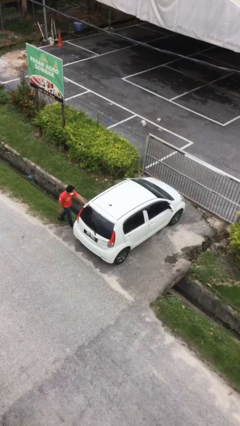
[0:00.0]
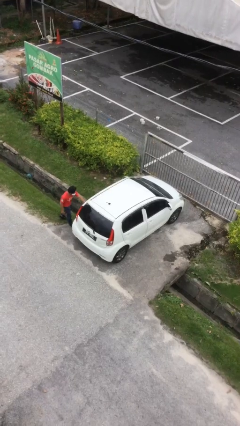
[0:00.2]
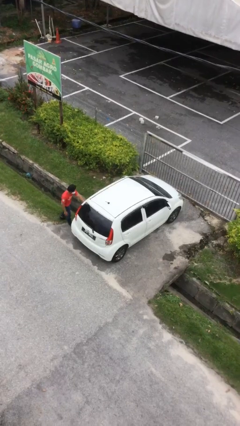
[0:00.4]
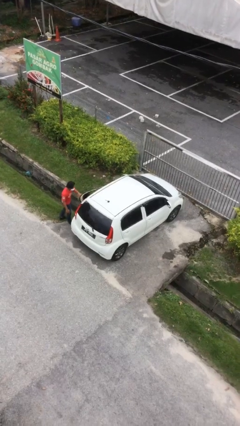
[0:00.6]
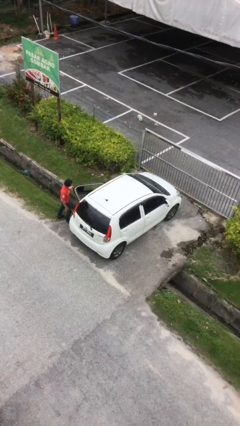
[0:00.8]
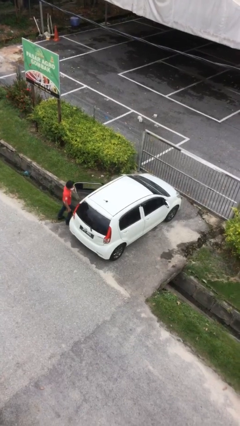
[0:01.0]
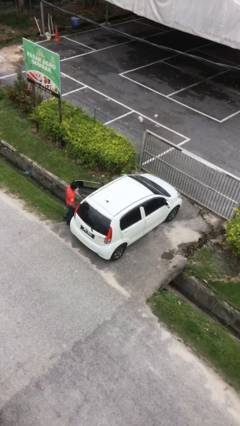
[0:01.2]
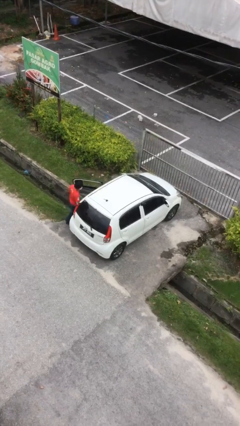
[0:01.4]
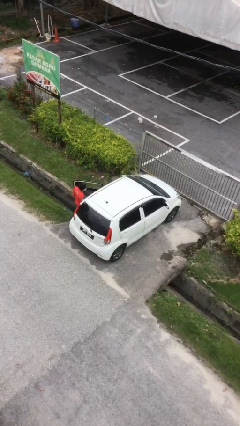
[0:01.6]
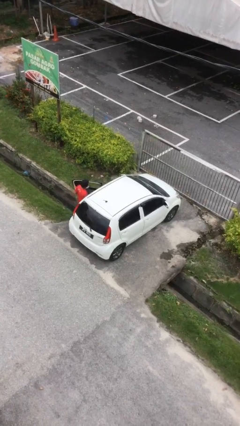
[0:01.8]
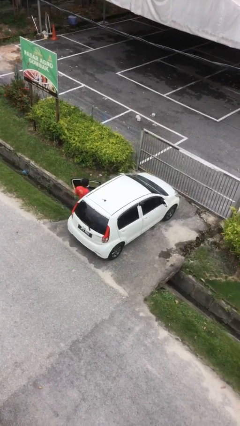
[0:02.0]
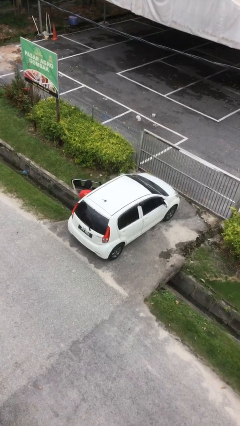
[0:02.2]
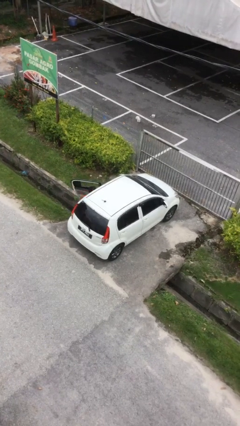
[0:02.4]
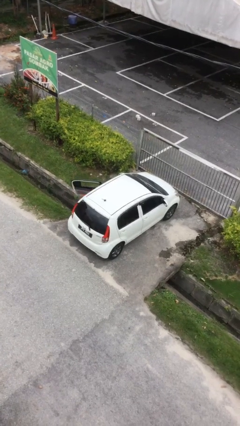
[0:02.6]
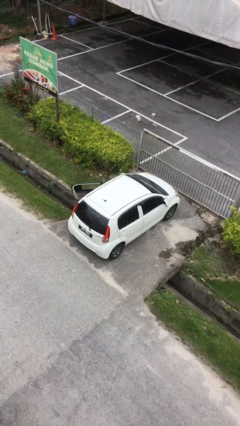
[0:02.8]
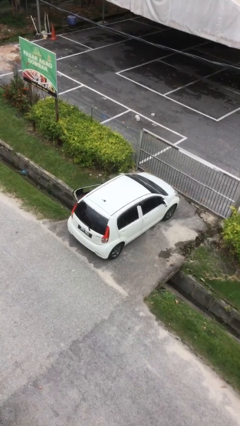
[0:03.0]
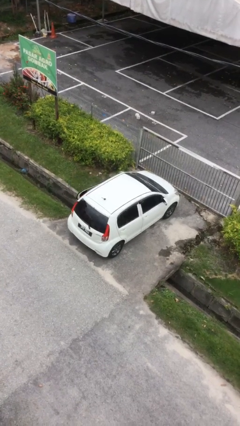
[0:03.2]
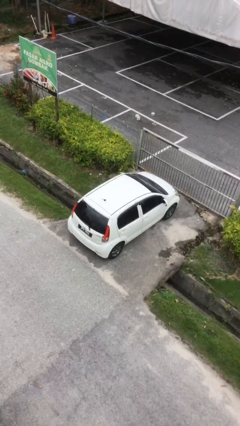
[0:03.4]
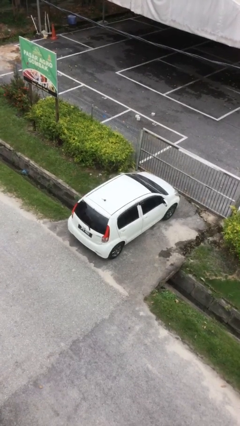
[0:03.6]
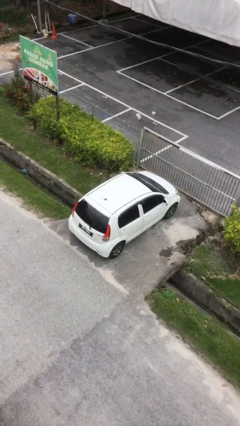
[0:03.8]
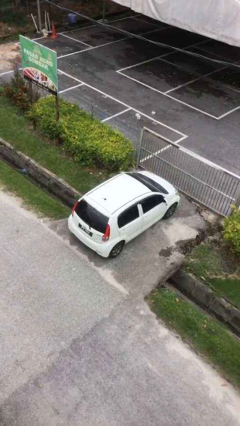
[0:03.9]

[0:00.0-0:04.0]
car picks up person

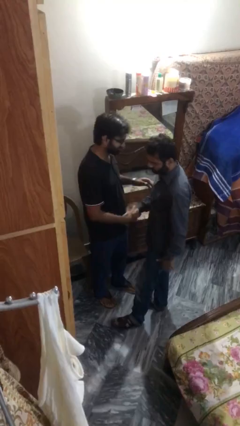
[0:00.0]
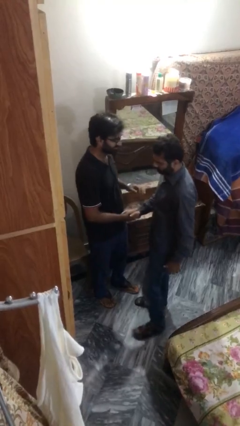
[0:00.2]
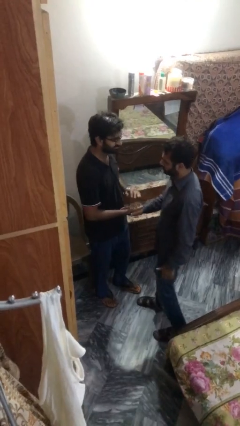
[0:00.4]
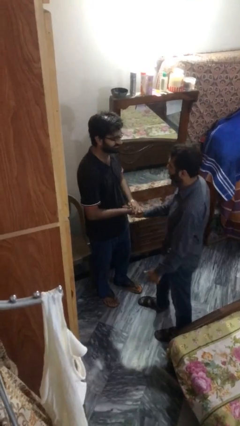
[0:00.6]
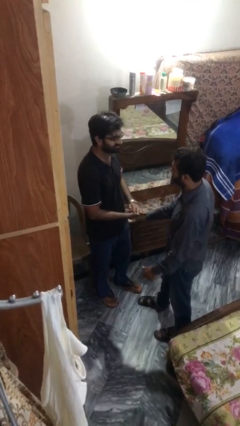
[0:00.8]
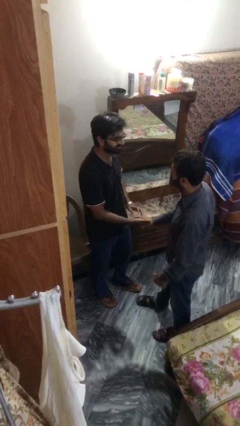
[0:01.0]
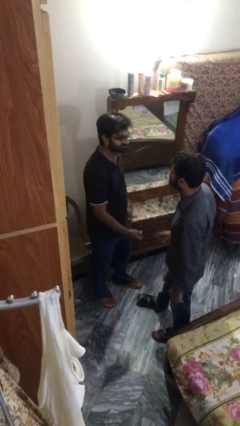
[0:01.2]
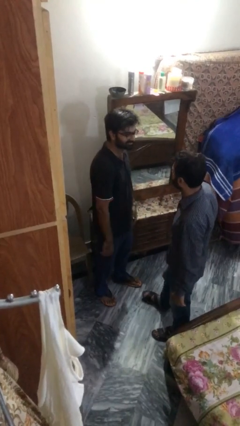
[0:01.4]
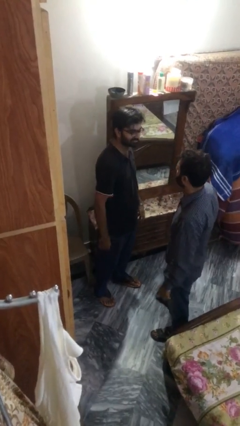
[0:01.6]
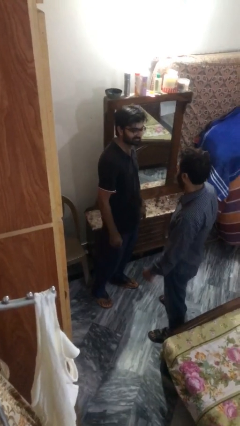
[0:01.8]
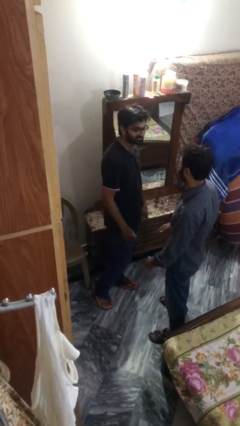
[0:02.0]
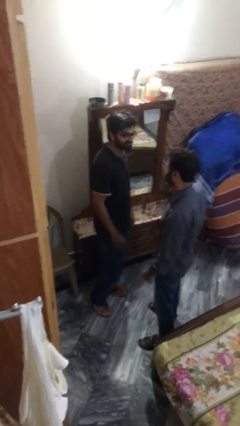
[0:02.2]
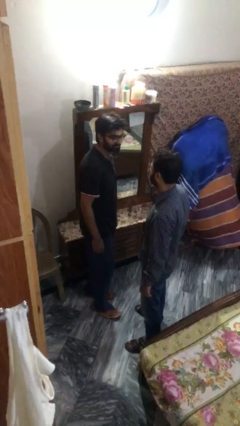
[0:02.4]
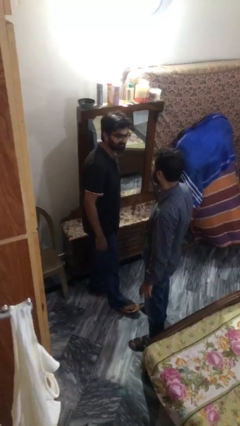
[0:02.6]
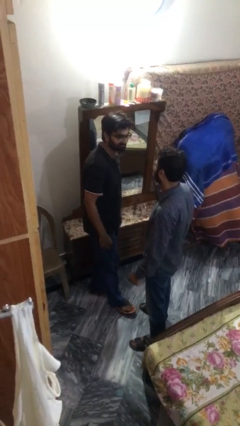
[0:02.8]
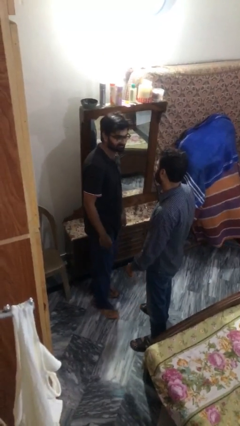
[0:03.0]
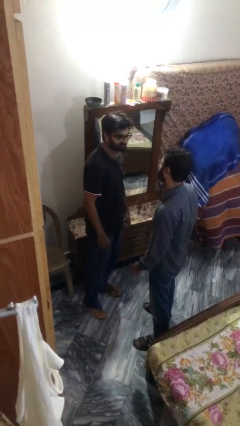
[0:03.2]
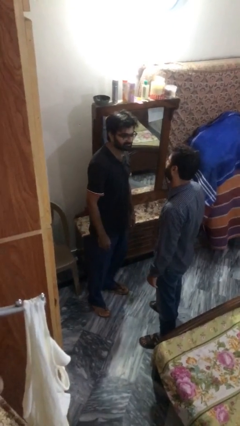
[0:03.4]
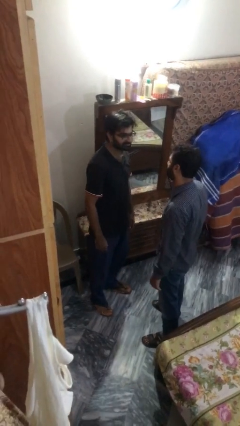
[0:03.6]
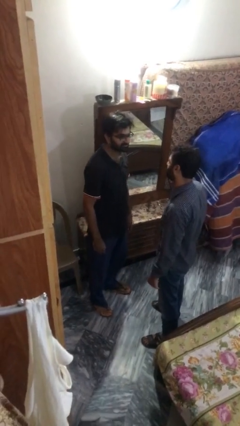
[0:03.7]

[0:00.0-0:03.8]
person talks to person

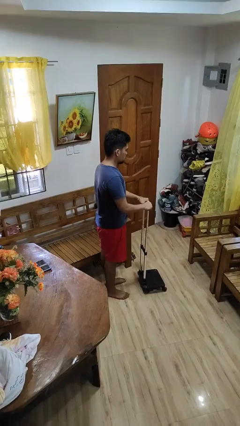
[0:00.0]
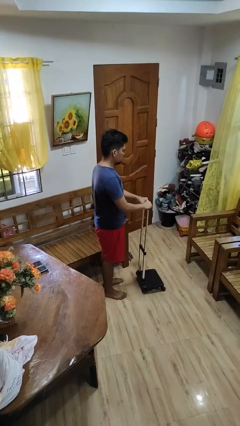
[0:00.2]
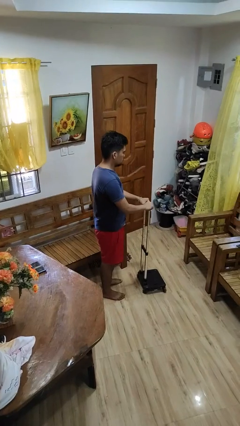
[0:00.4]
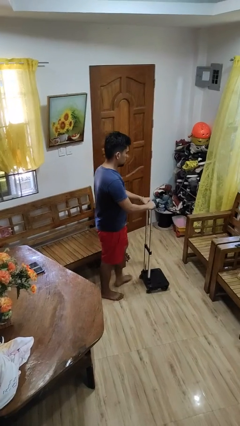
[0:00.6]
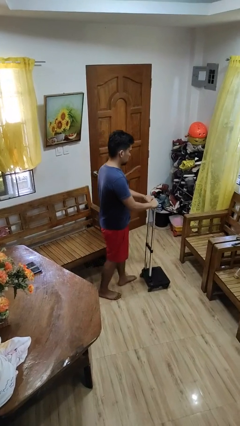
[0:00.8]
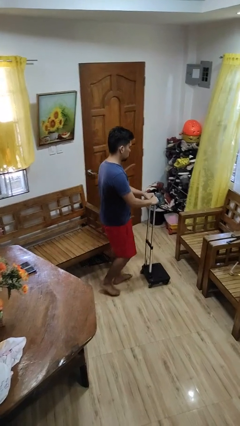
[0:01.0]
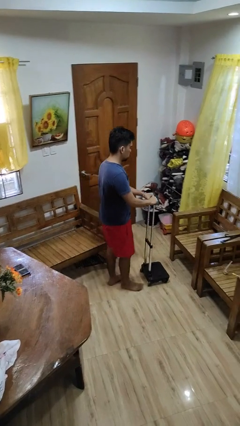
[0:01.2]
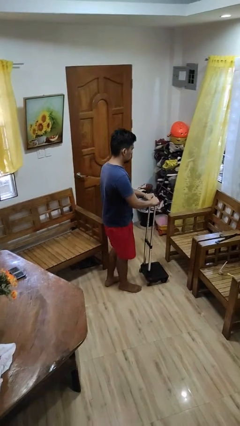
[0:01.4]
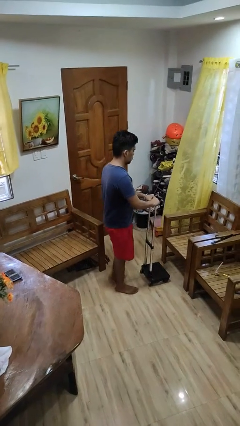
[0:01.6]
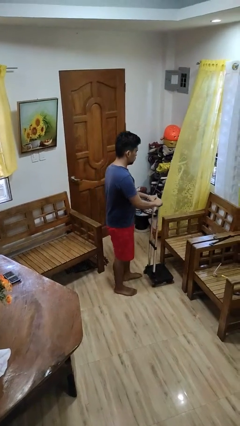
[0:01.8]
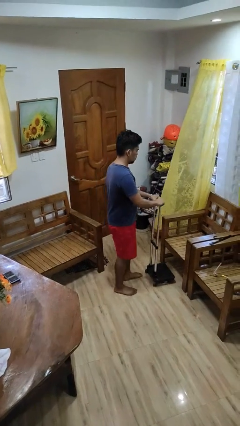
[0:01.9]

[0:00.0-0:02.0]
person pushes wheeled cart

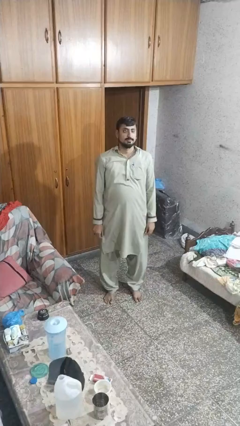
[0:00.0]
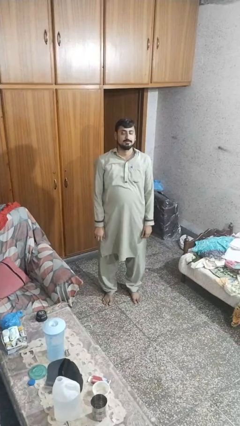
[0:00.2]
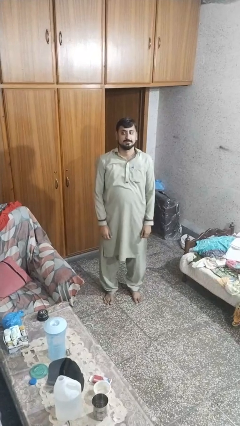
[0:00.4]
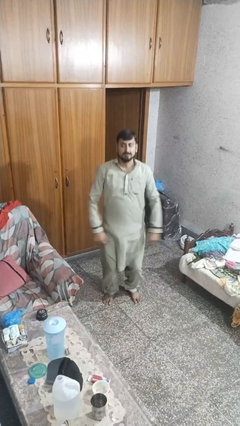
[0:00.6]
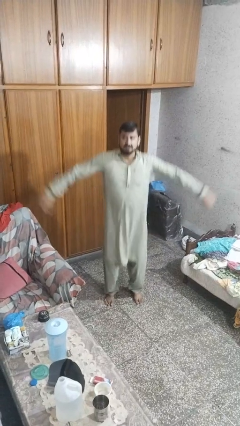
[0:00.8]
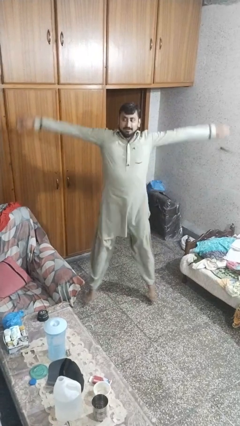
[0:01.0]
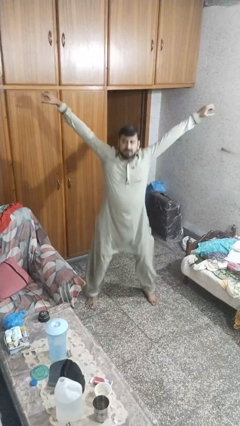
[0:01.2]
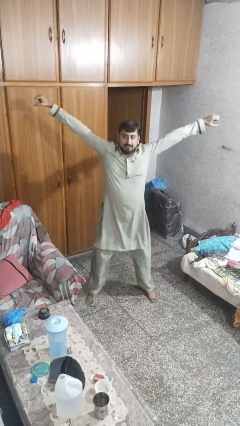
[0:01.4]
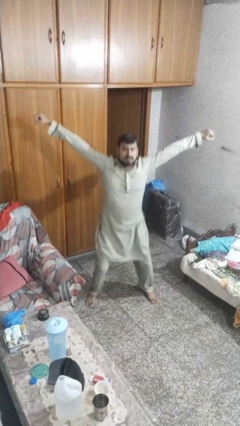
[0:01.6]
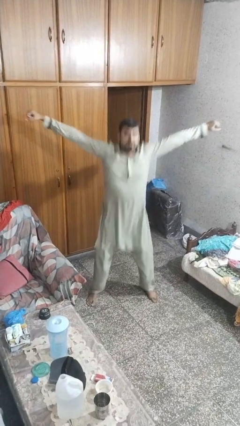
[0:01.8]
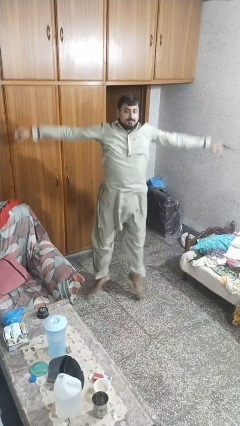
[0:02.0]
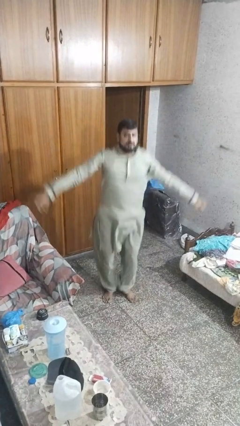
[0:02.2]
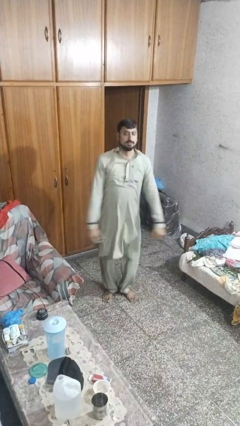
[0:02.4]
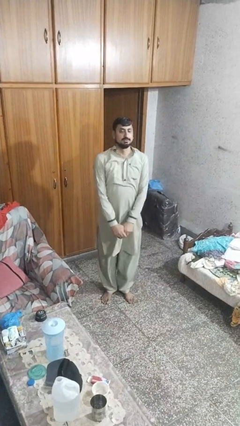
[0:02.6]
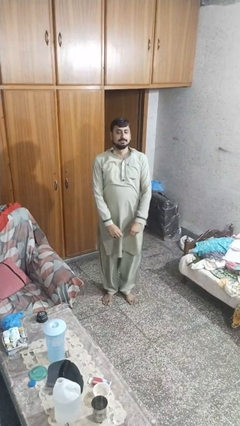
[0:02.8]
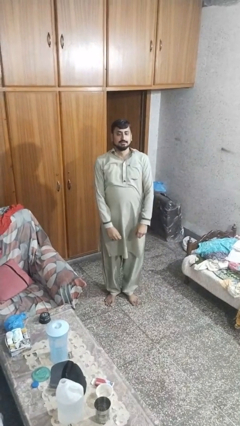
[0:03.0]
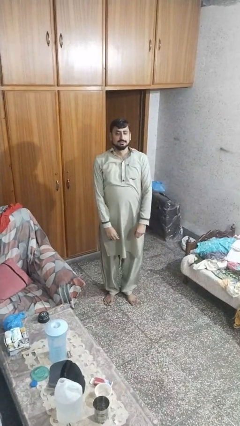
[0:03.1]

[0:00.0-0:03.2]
person exercises with jumping jacks

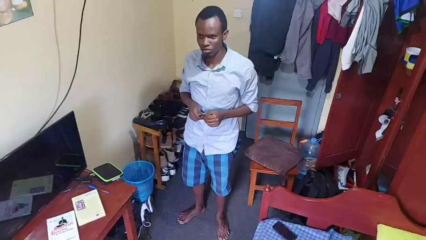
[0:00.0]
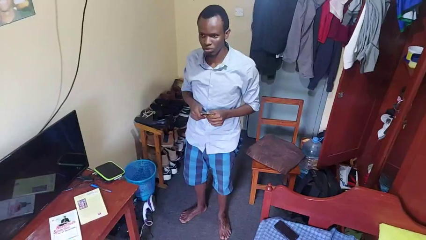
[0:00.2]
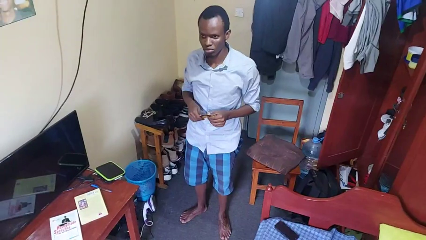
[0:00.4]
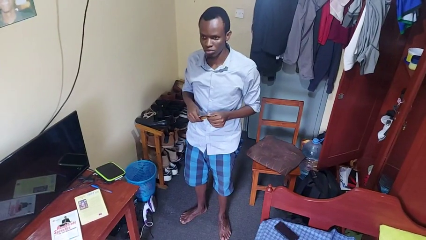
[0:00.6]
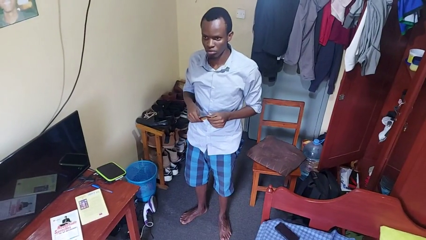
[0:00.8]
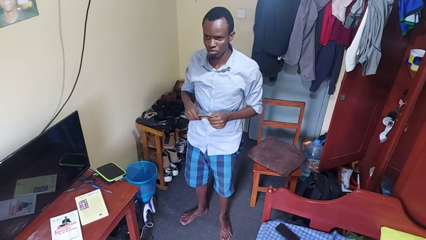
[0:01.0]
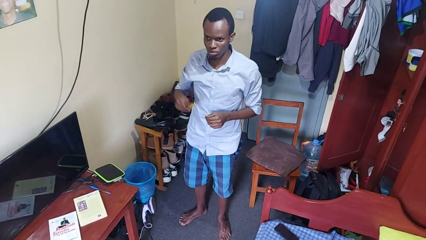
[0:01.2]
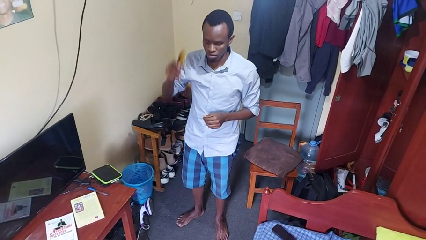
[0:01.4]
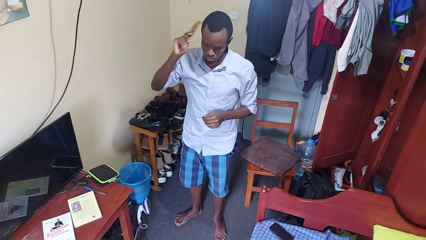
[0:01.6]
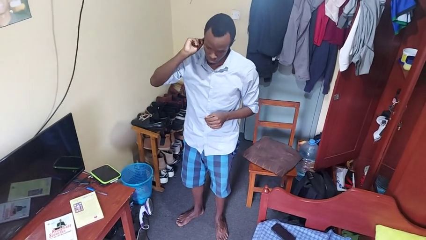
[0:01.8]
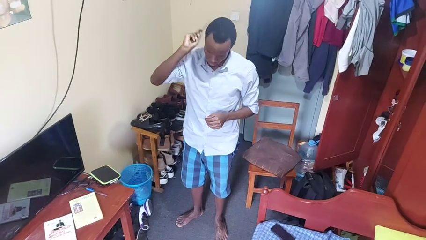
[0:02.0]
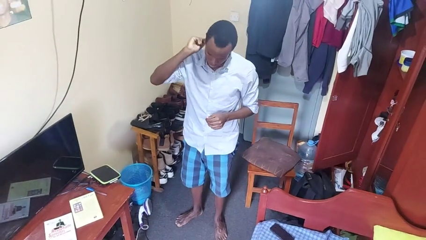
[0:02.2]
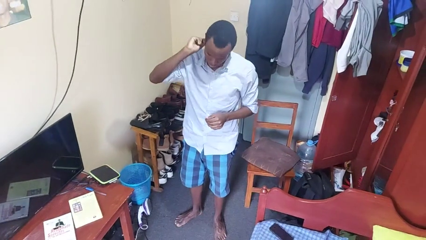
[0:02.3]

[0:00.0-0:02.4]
person brushes hair

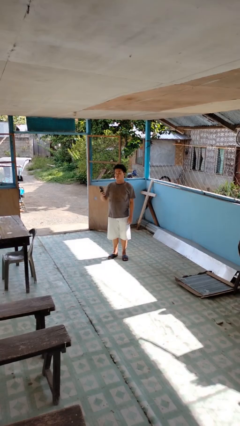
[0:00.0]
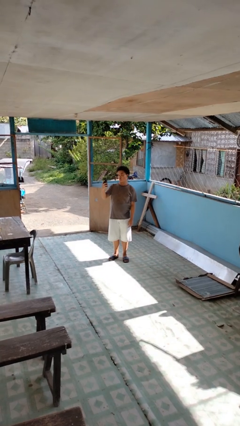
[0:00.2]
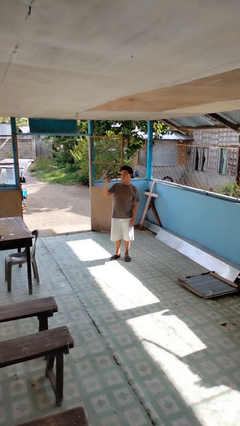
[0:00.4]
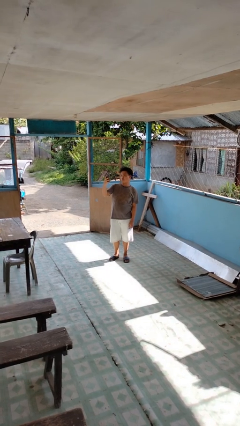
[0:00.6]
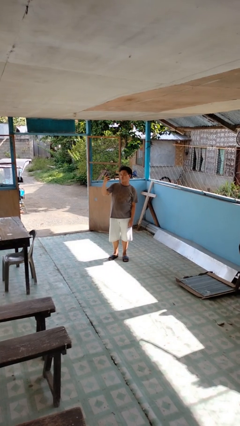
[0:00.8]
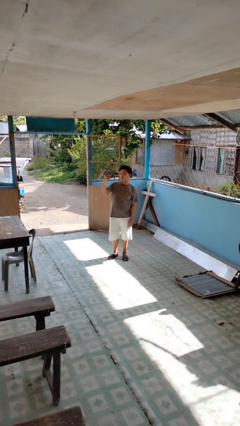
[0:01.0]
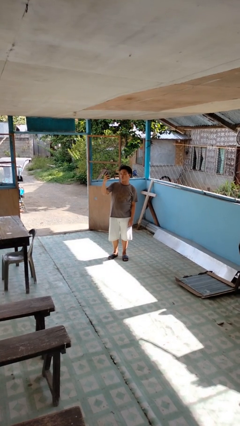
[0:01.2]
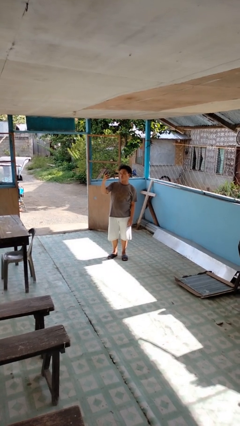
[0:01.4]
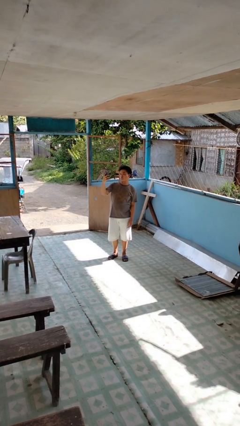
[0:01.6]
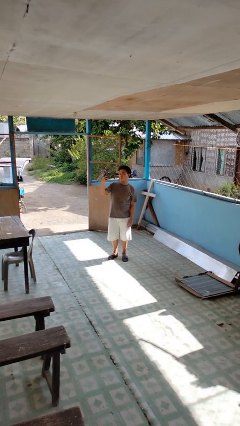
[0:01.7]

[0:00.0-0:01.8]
person takes selfie

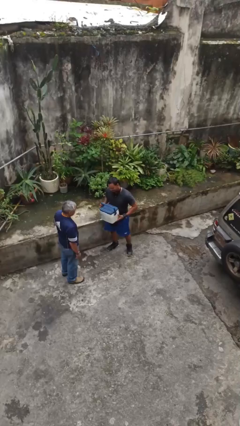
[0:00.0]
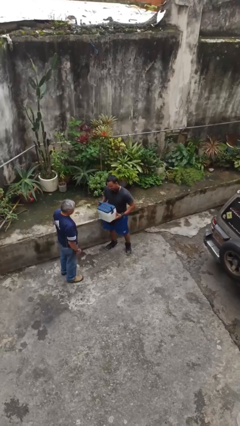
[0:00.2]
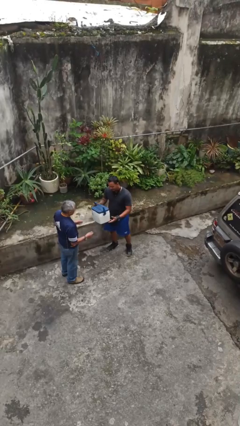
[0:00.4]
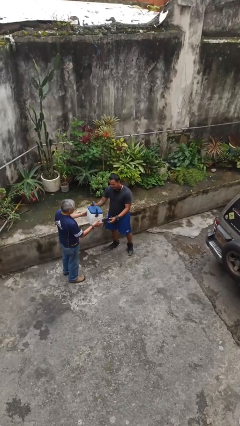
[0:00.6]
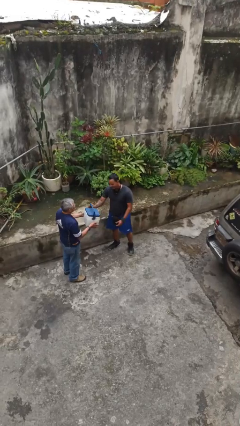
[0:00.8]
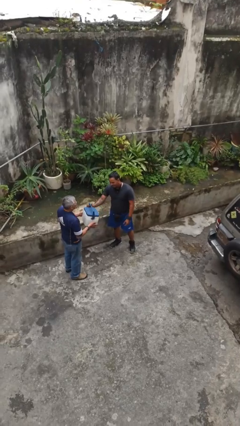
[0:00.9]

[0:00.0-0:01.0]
person transfers object to person
